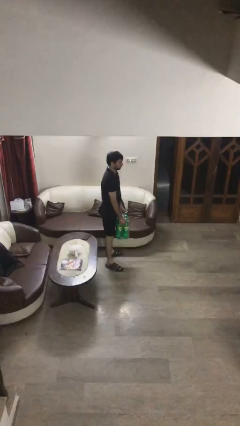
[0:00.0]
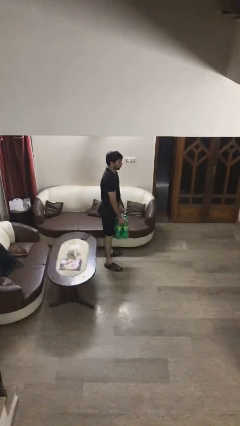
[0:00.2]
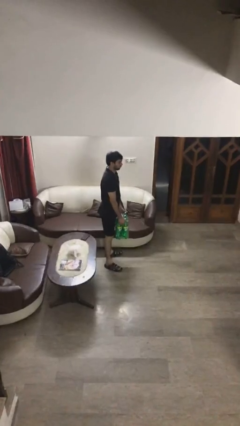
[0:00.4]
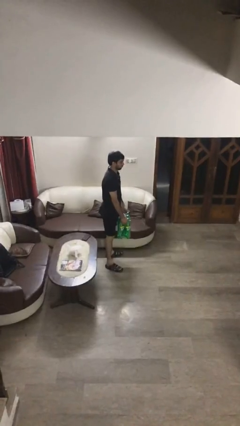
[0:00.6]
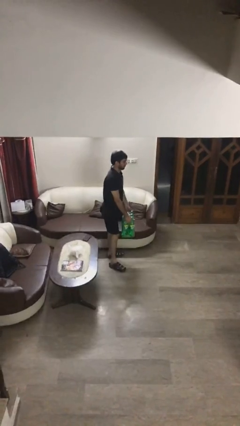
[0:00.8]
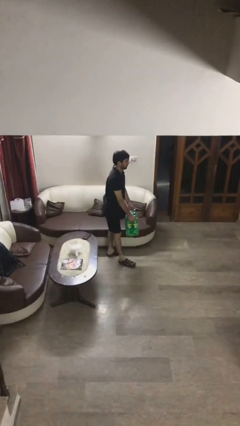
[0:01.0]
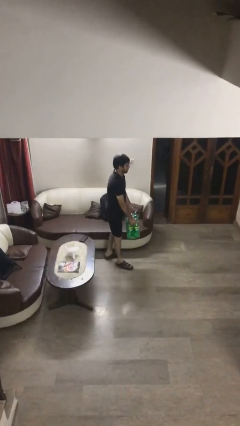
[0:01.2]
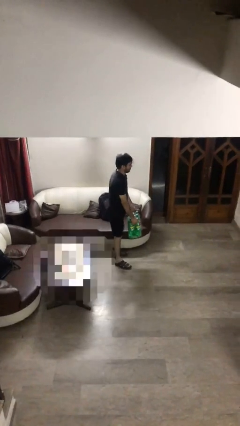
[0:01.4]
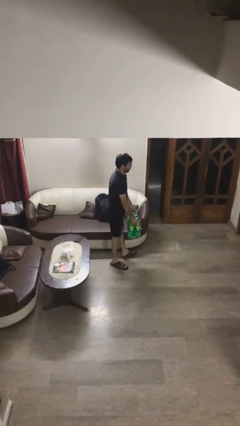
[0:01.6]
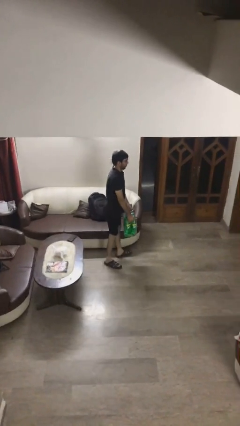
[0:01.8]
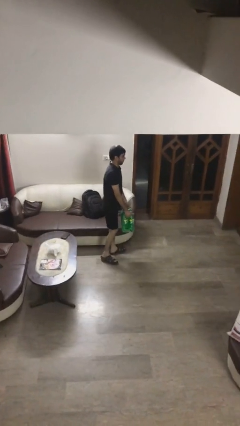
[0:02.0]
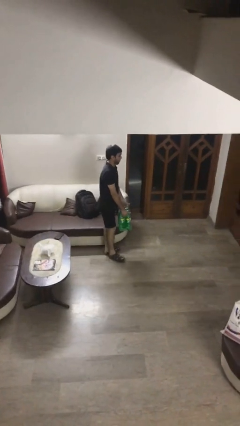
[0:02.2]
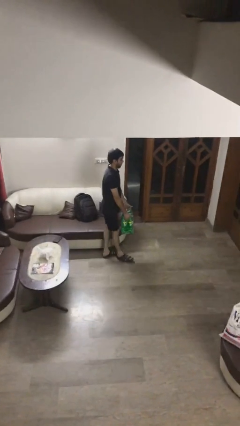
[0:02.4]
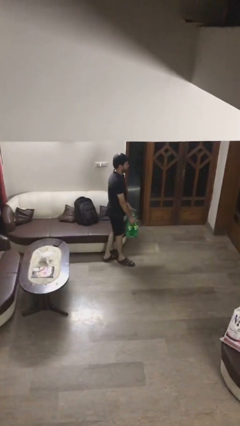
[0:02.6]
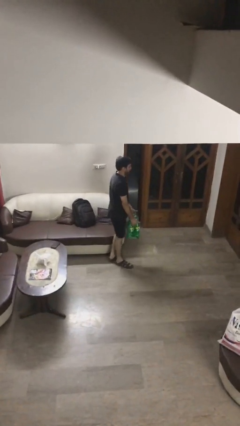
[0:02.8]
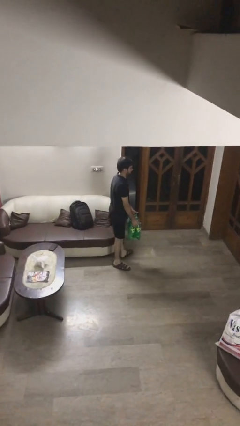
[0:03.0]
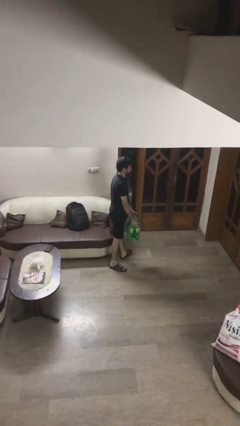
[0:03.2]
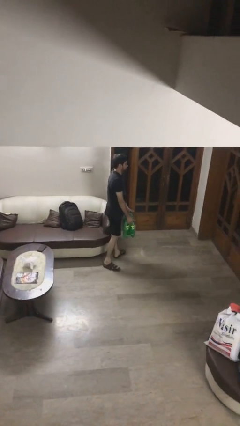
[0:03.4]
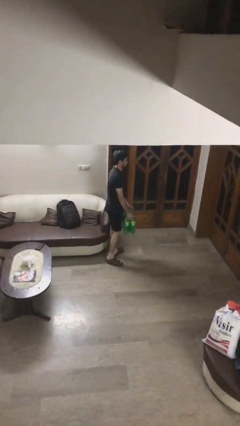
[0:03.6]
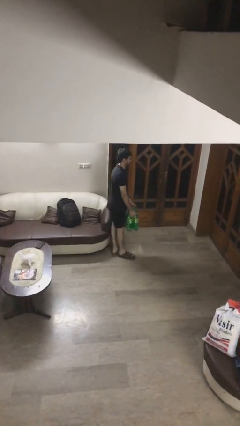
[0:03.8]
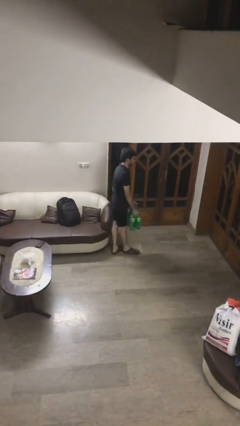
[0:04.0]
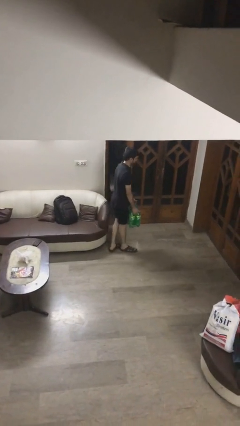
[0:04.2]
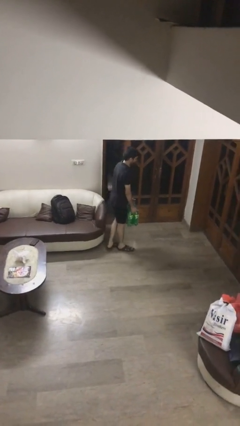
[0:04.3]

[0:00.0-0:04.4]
person carries heavy object

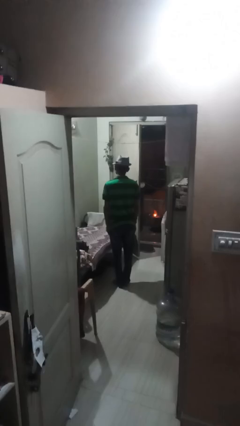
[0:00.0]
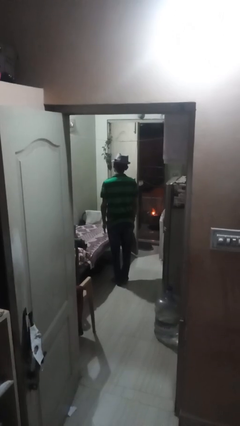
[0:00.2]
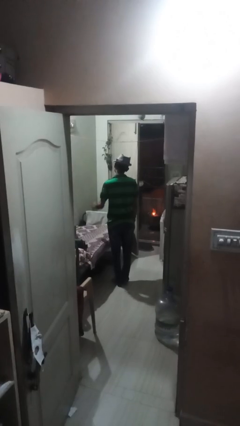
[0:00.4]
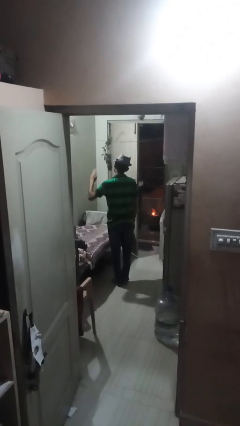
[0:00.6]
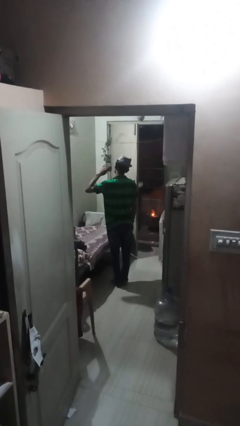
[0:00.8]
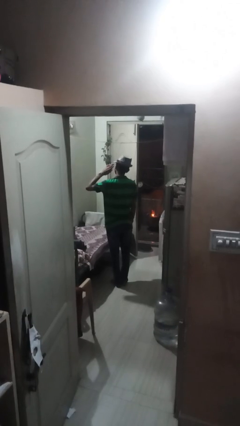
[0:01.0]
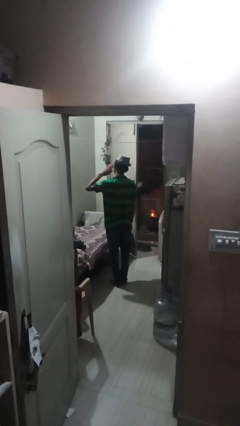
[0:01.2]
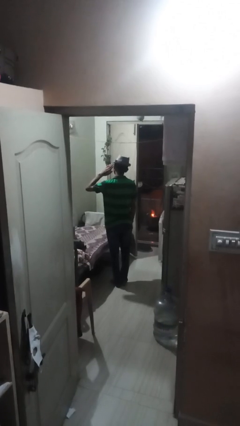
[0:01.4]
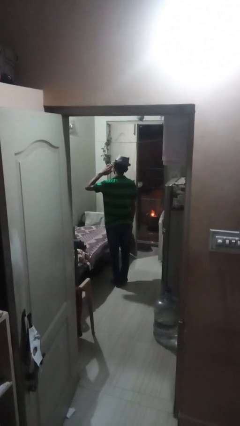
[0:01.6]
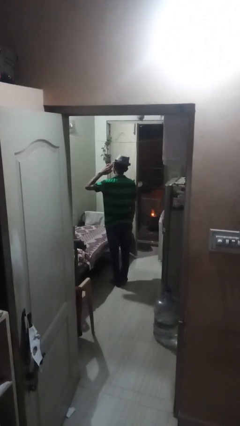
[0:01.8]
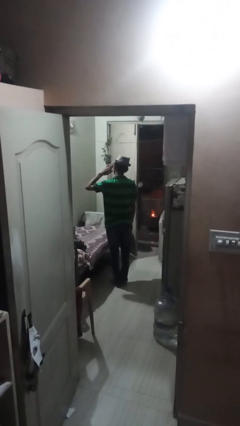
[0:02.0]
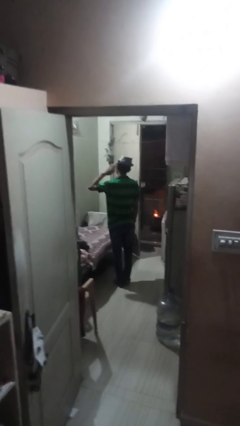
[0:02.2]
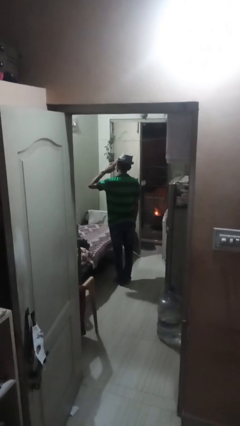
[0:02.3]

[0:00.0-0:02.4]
person salutes

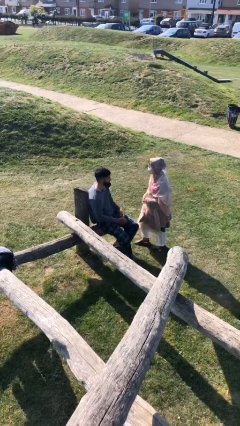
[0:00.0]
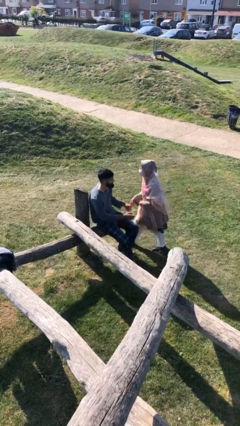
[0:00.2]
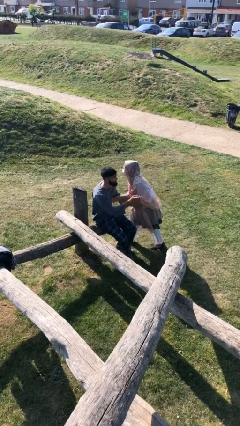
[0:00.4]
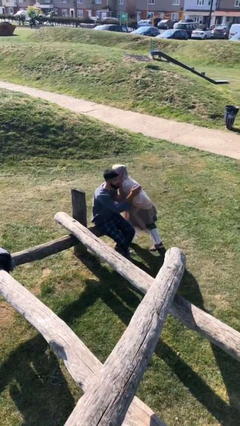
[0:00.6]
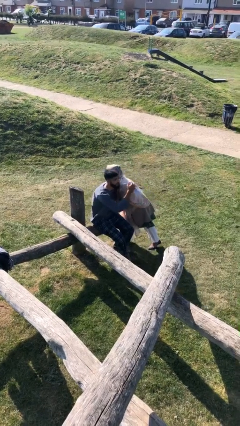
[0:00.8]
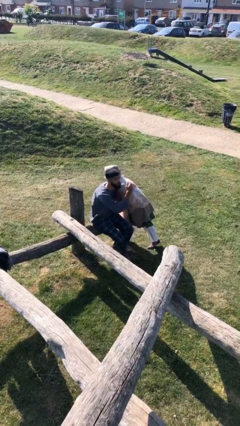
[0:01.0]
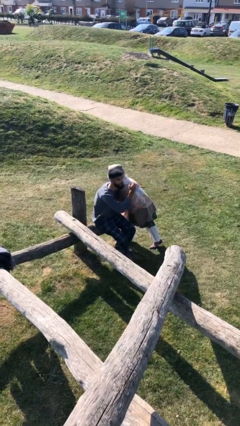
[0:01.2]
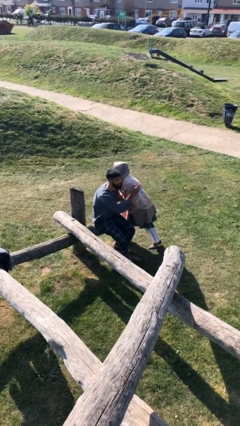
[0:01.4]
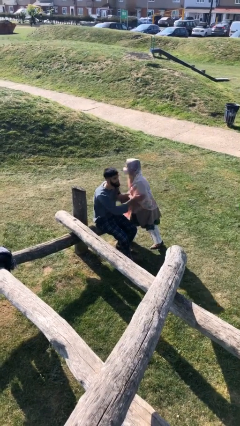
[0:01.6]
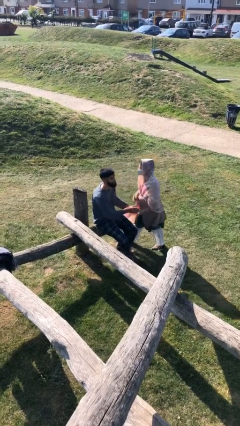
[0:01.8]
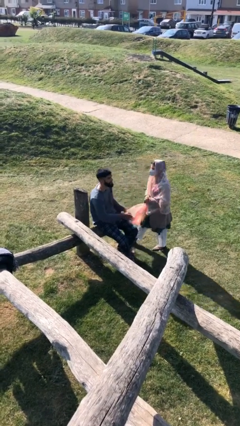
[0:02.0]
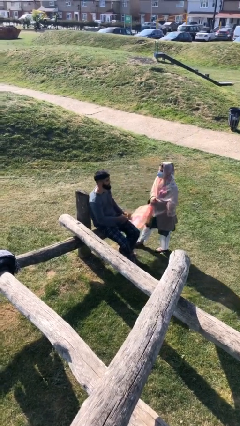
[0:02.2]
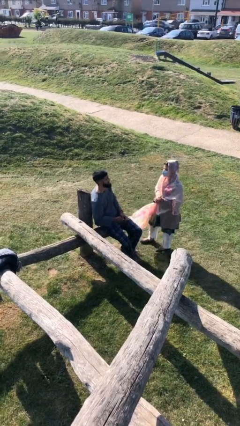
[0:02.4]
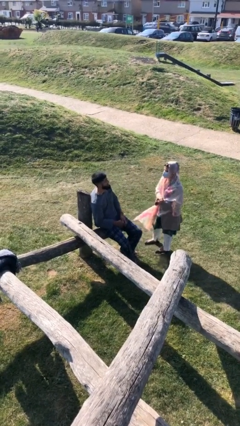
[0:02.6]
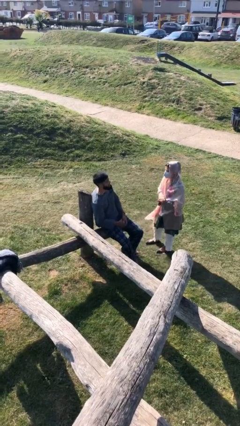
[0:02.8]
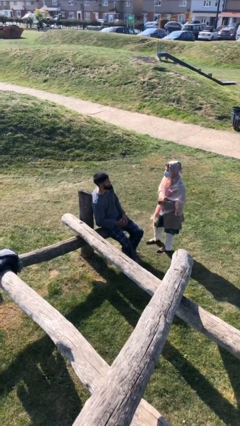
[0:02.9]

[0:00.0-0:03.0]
person embraces person

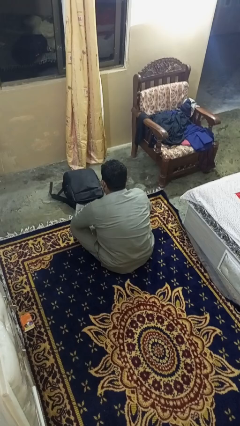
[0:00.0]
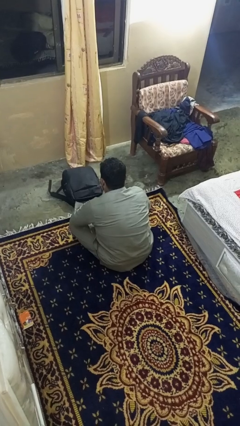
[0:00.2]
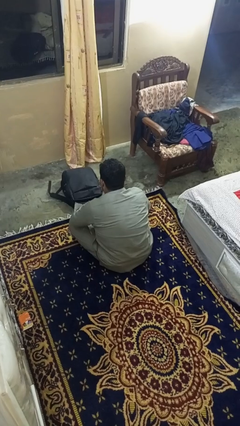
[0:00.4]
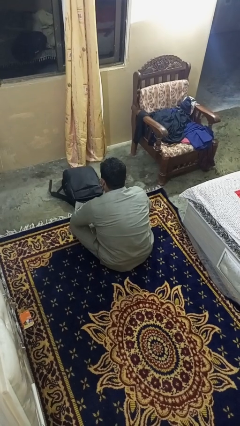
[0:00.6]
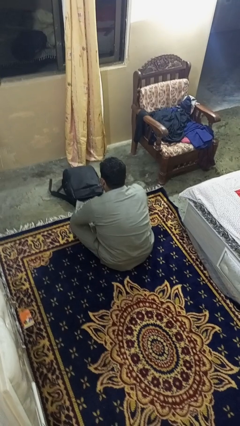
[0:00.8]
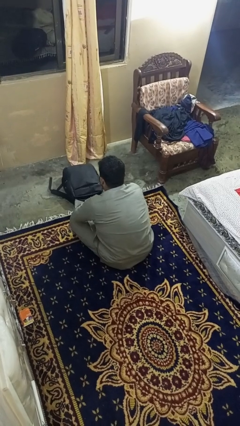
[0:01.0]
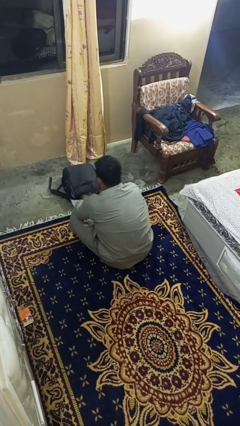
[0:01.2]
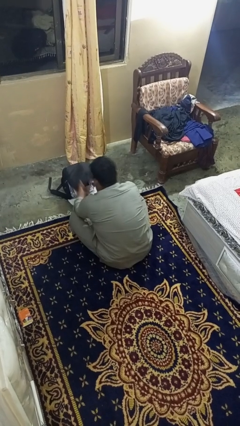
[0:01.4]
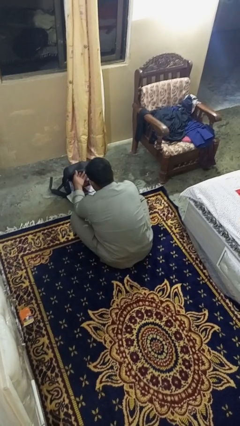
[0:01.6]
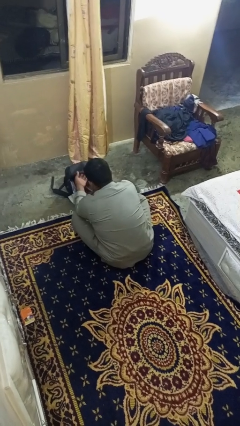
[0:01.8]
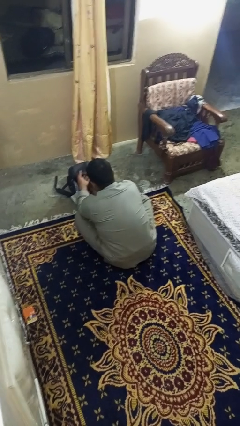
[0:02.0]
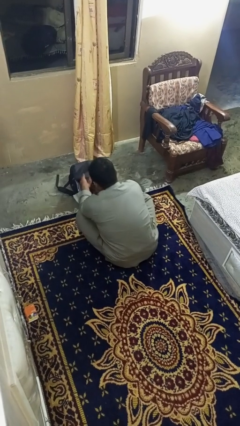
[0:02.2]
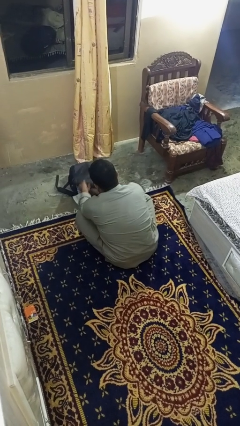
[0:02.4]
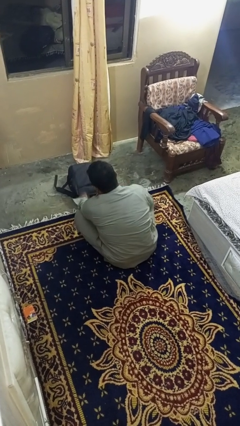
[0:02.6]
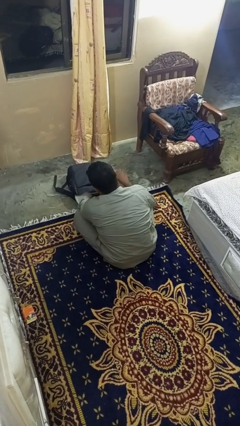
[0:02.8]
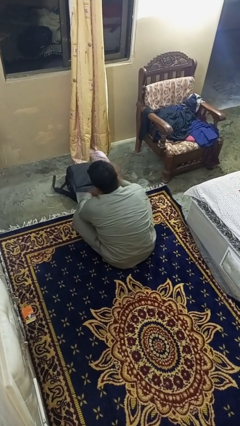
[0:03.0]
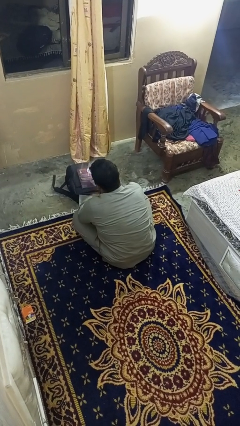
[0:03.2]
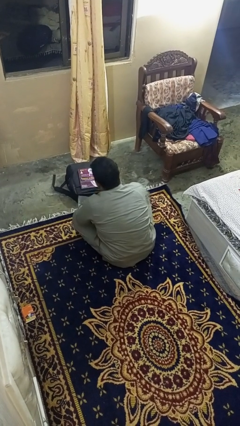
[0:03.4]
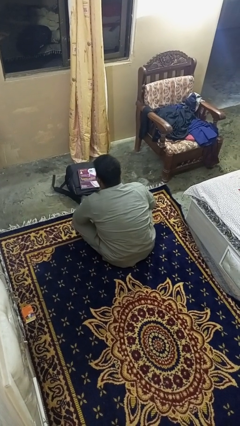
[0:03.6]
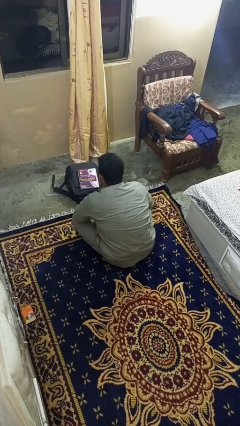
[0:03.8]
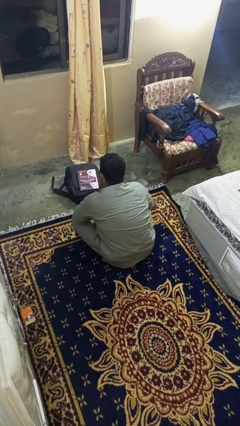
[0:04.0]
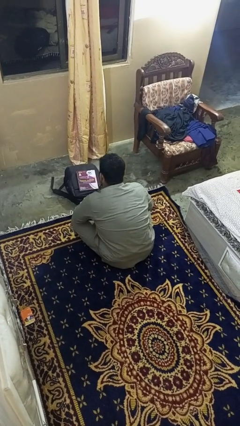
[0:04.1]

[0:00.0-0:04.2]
person takes object from bag

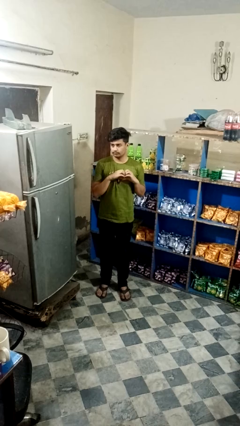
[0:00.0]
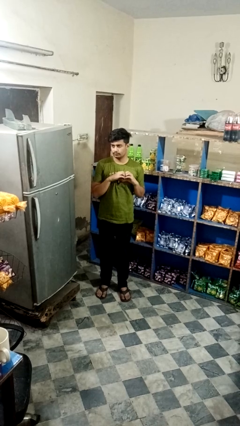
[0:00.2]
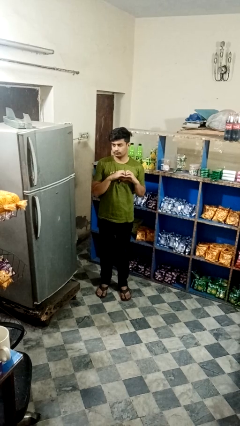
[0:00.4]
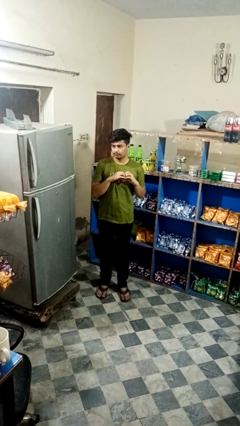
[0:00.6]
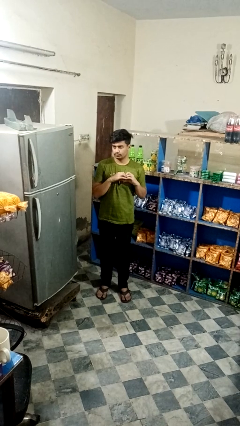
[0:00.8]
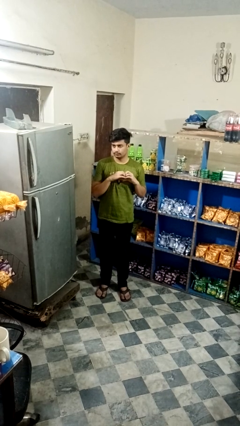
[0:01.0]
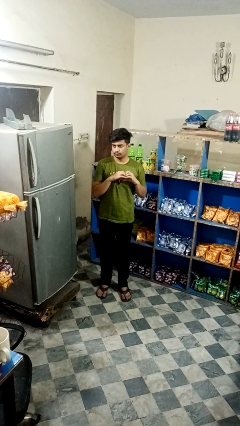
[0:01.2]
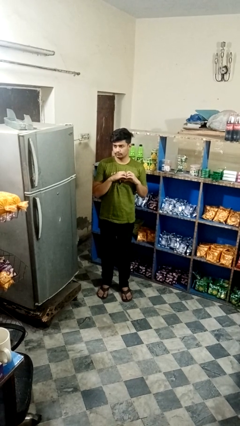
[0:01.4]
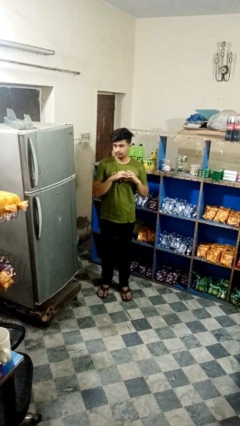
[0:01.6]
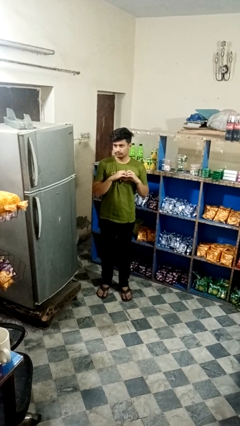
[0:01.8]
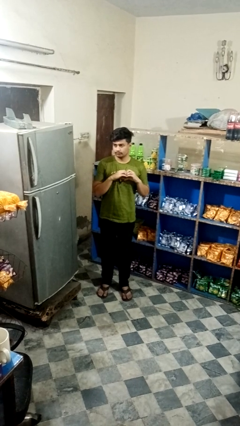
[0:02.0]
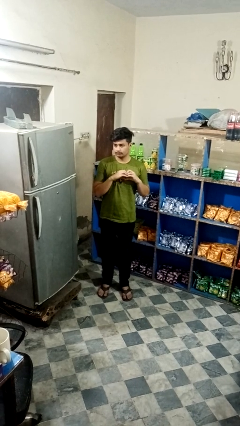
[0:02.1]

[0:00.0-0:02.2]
person gestures heart

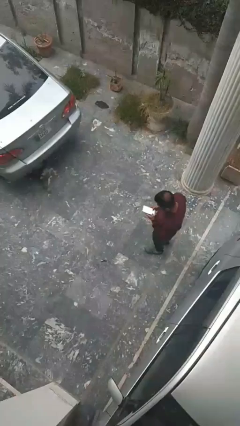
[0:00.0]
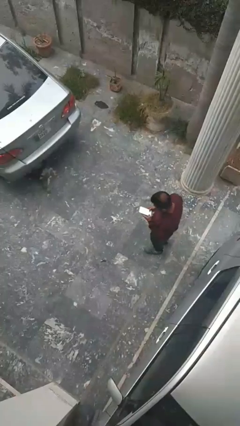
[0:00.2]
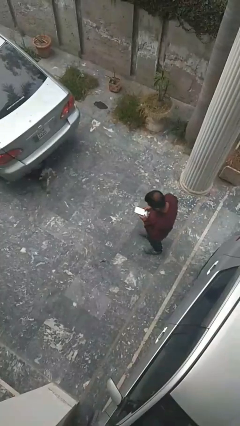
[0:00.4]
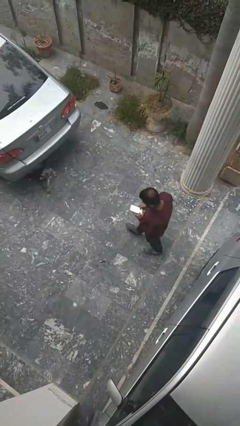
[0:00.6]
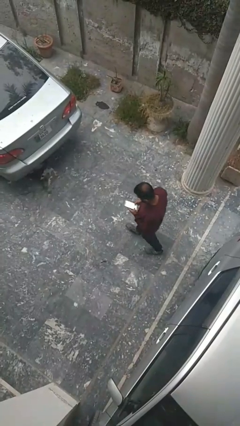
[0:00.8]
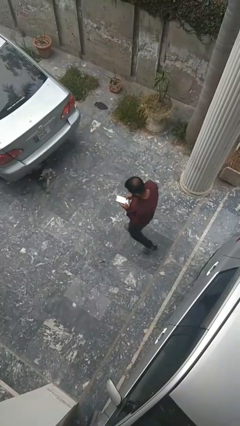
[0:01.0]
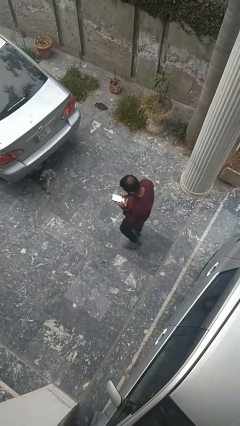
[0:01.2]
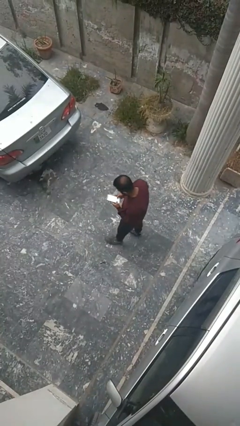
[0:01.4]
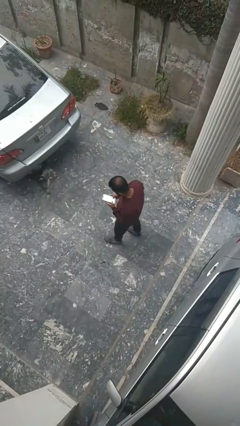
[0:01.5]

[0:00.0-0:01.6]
person enters scene through structure
